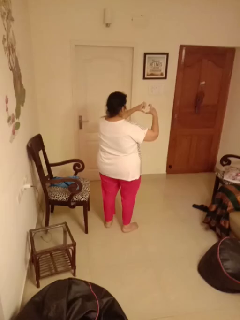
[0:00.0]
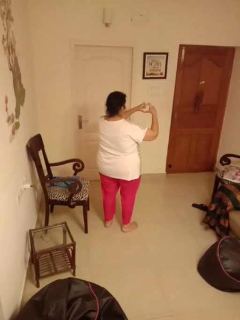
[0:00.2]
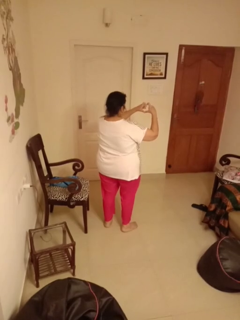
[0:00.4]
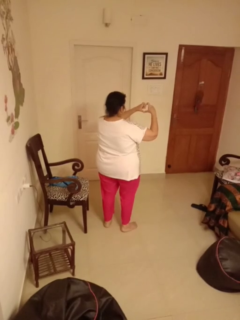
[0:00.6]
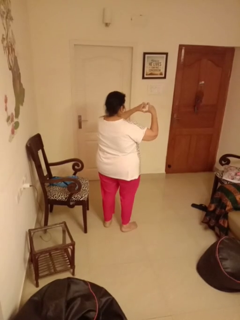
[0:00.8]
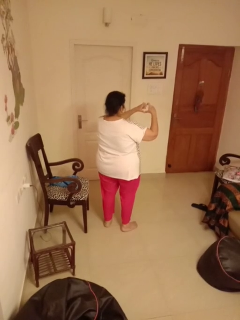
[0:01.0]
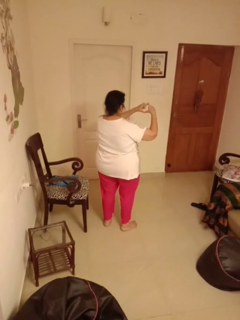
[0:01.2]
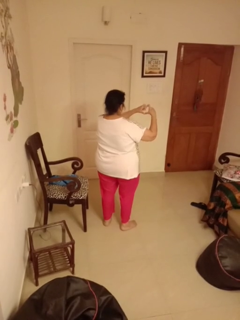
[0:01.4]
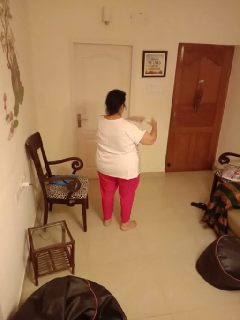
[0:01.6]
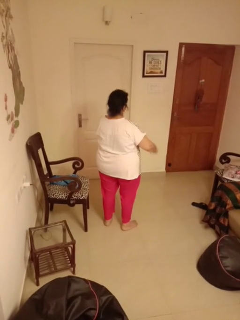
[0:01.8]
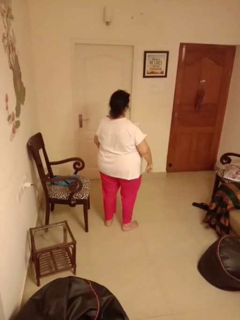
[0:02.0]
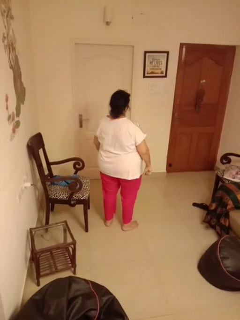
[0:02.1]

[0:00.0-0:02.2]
person gestures heart

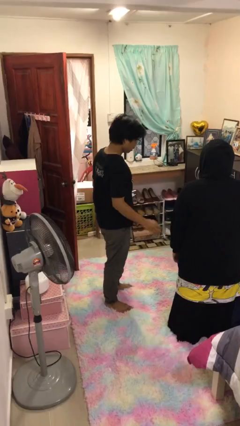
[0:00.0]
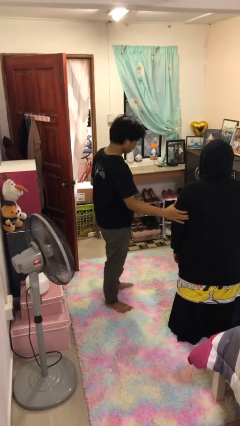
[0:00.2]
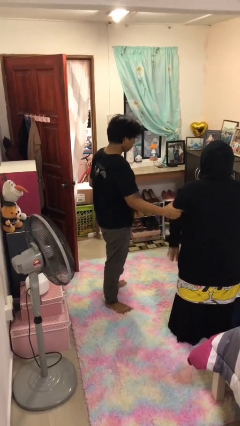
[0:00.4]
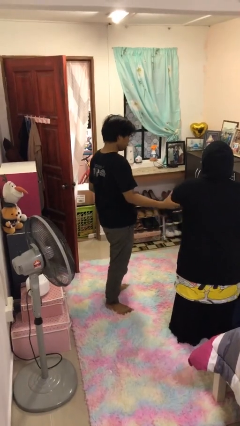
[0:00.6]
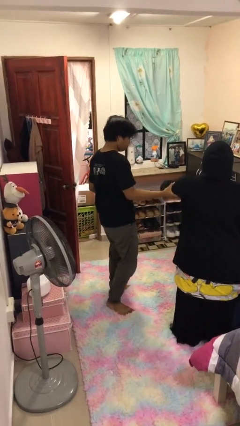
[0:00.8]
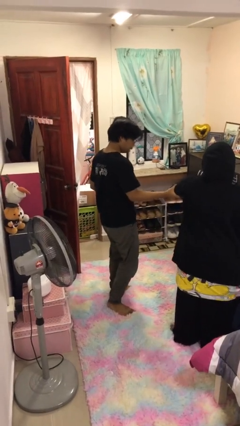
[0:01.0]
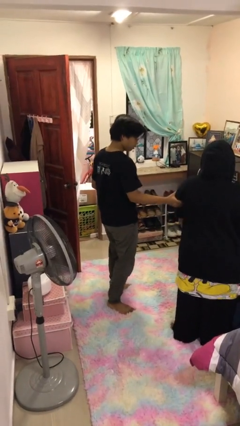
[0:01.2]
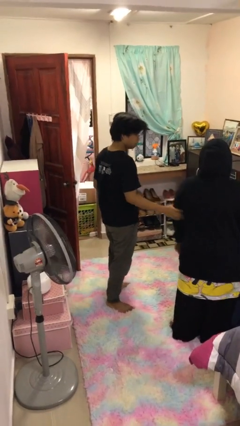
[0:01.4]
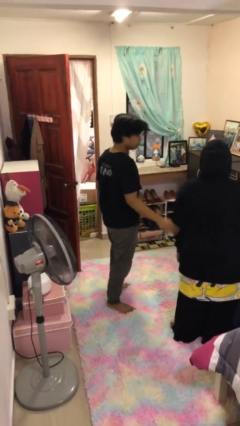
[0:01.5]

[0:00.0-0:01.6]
person grabs person by bicep

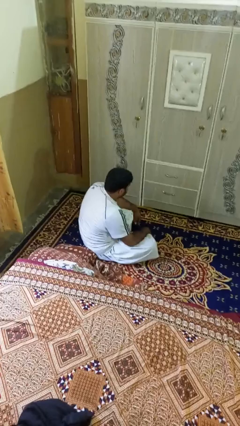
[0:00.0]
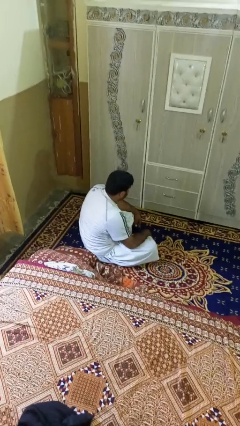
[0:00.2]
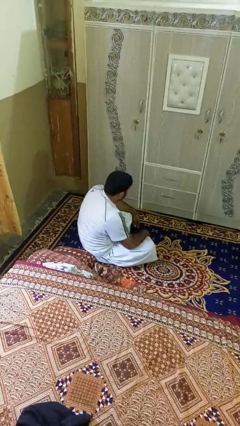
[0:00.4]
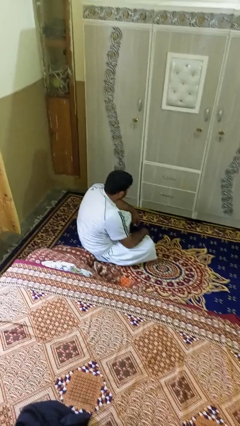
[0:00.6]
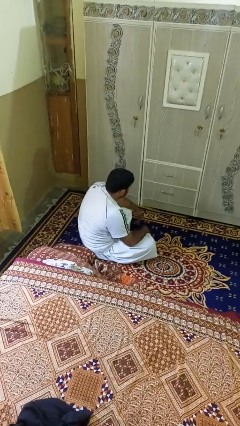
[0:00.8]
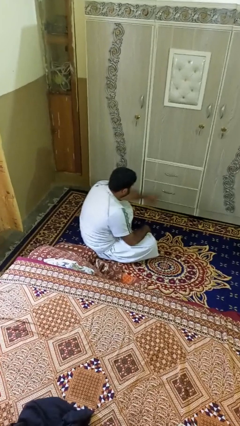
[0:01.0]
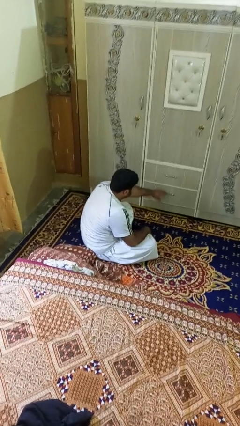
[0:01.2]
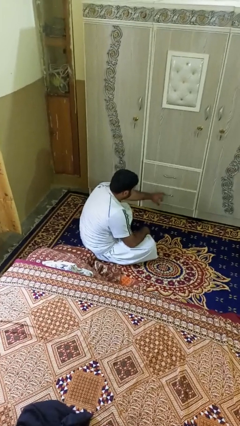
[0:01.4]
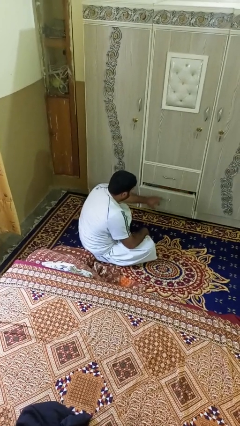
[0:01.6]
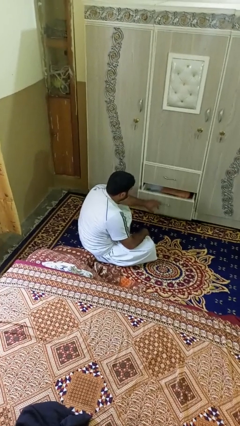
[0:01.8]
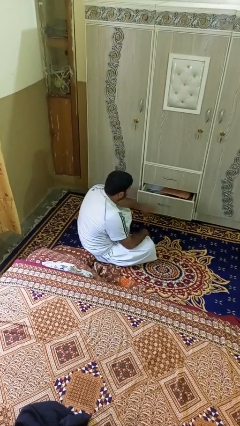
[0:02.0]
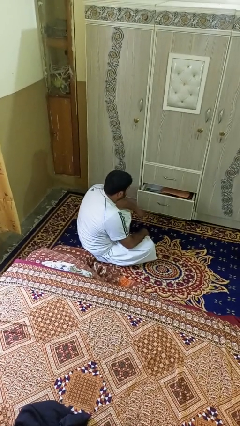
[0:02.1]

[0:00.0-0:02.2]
person opens dresser drawer

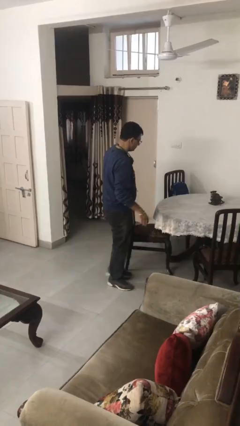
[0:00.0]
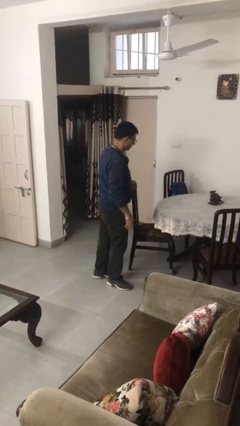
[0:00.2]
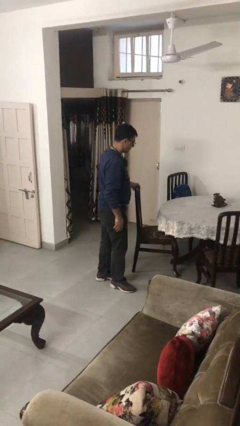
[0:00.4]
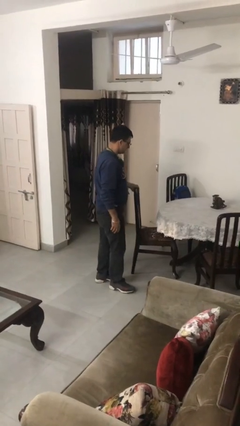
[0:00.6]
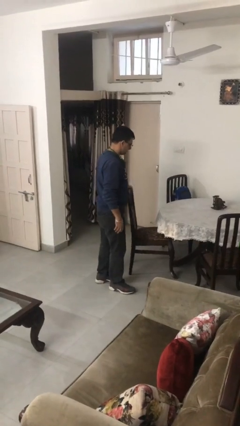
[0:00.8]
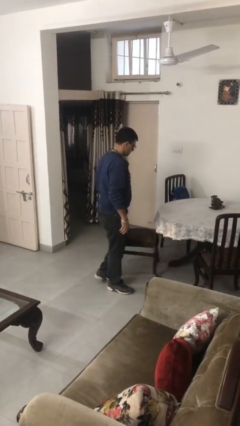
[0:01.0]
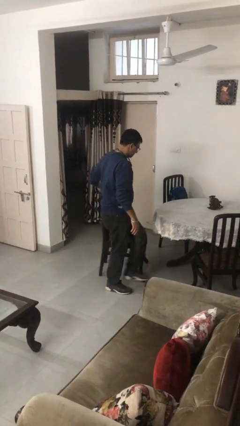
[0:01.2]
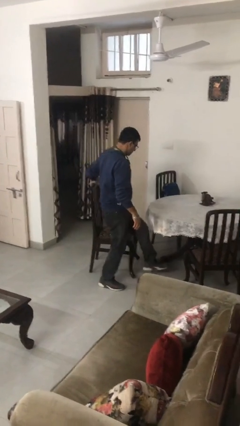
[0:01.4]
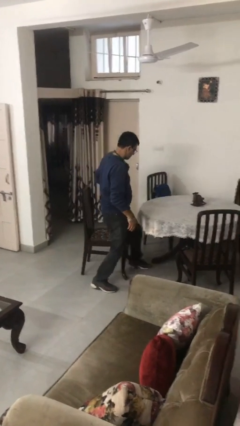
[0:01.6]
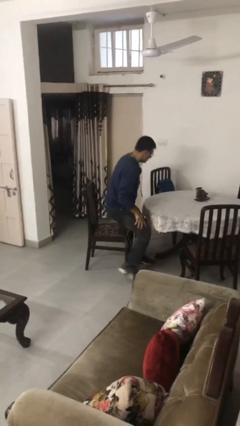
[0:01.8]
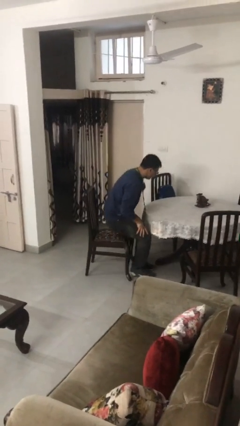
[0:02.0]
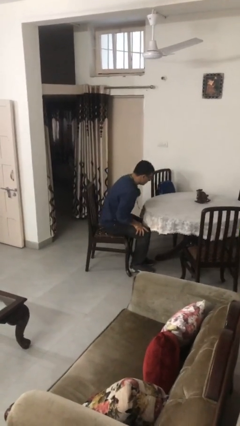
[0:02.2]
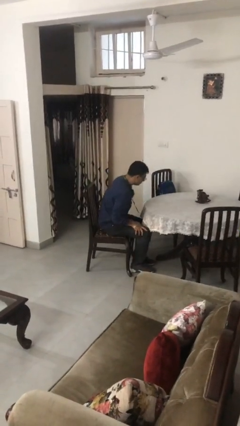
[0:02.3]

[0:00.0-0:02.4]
person sits down

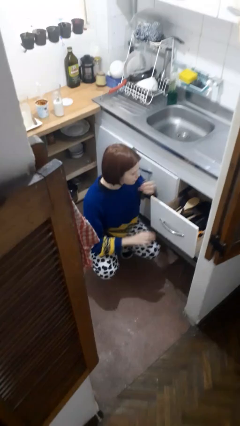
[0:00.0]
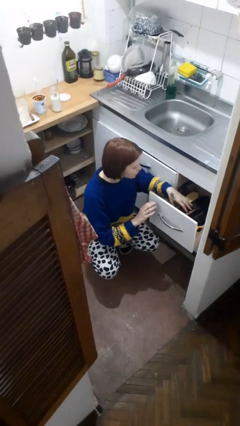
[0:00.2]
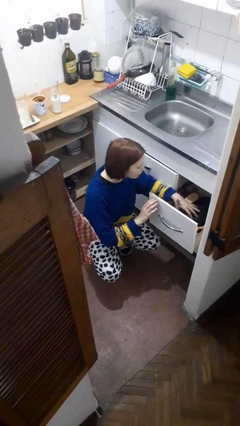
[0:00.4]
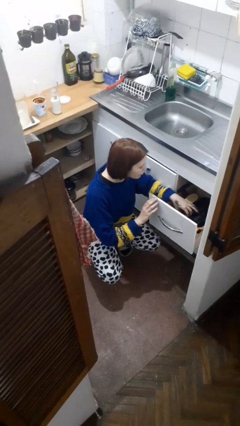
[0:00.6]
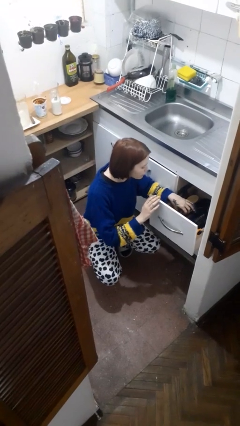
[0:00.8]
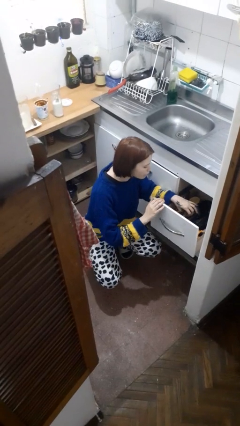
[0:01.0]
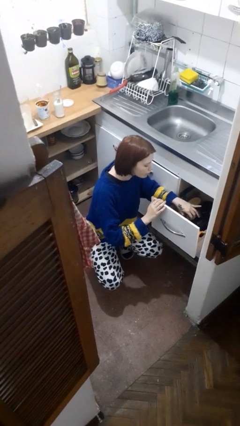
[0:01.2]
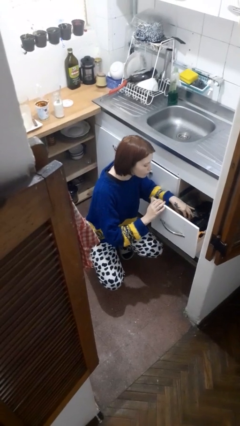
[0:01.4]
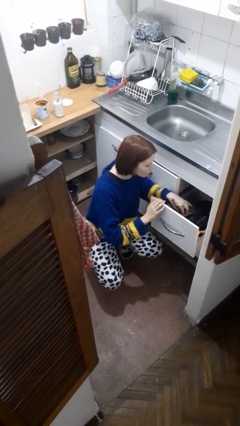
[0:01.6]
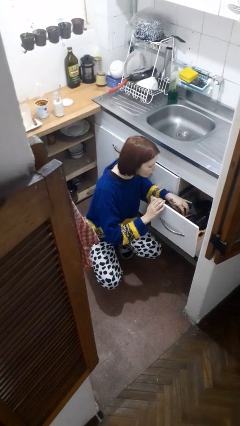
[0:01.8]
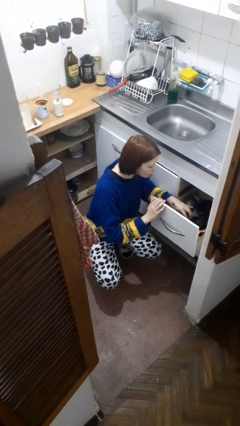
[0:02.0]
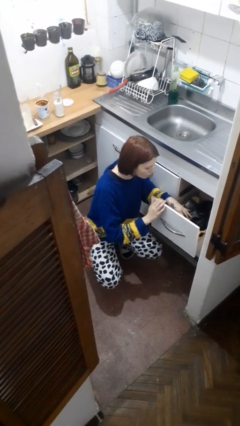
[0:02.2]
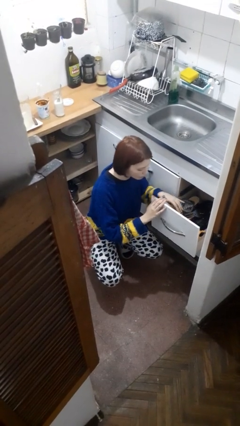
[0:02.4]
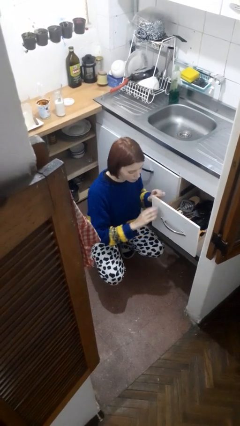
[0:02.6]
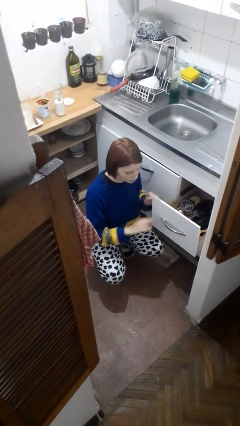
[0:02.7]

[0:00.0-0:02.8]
person searches in kitchen drawer

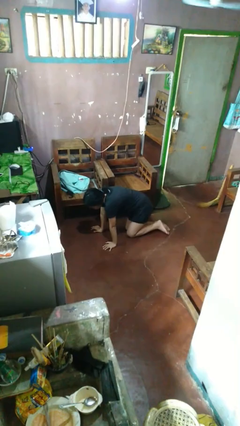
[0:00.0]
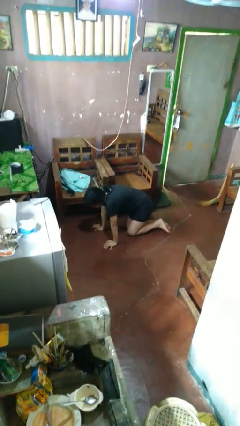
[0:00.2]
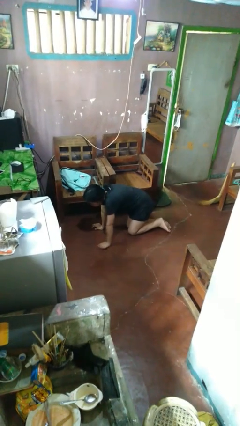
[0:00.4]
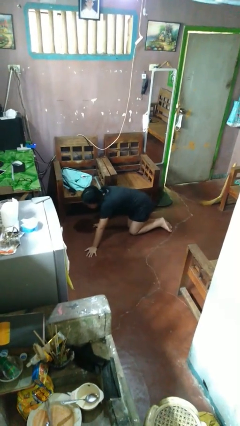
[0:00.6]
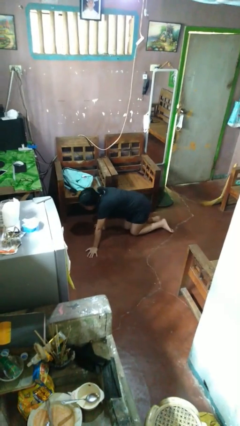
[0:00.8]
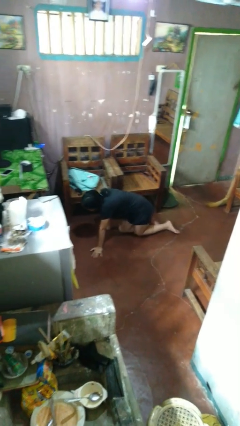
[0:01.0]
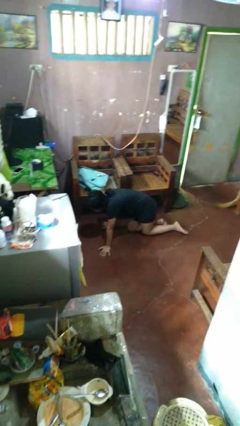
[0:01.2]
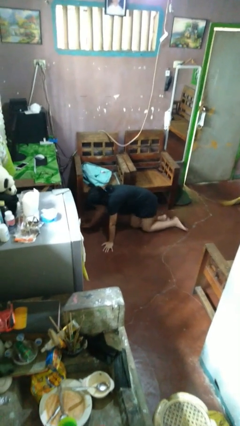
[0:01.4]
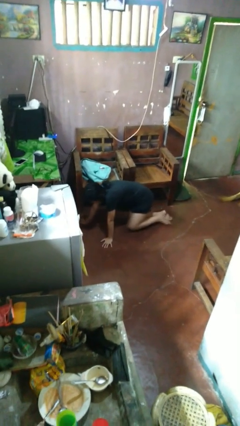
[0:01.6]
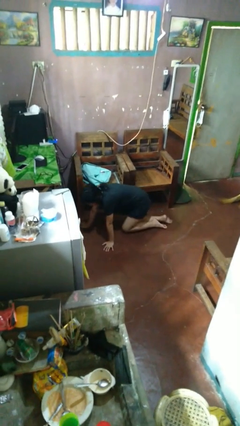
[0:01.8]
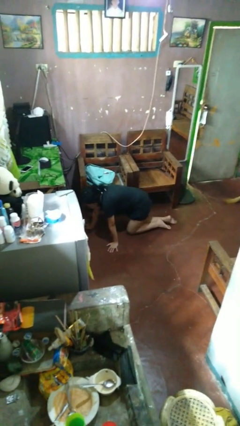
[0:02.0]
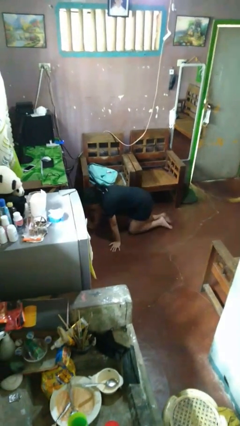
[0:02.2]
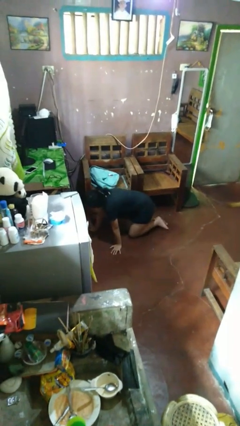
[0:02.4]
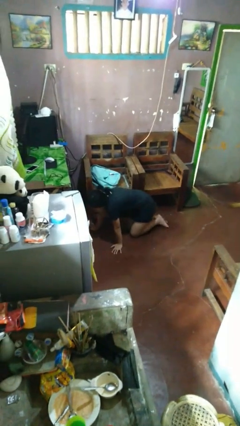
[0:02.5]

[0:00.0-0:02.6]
person crawls

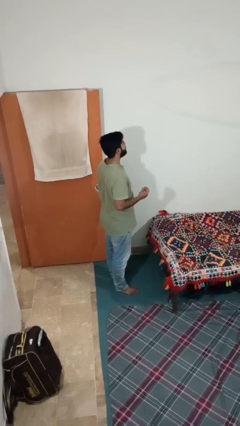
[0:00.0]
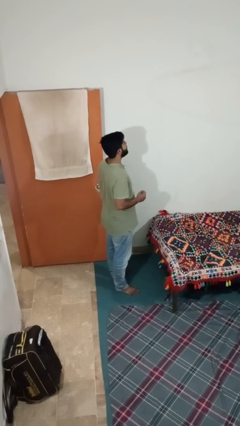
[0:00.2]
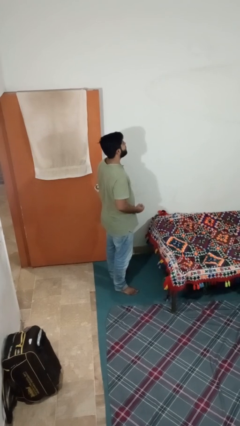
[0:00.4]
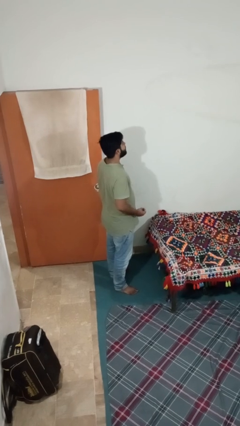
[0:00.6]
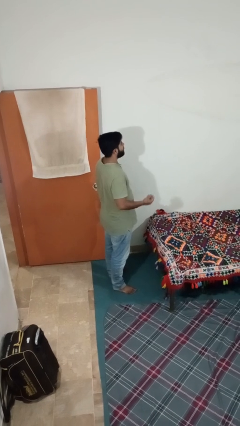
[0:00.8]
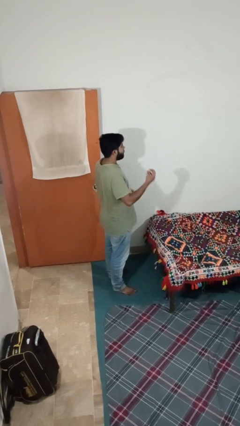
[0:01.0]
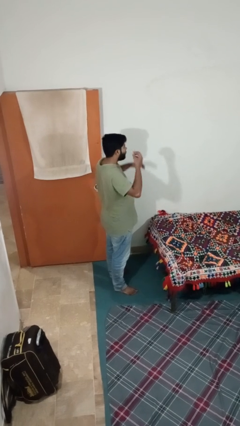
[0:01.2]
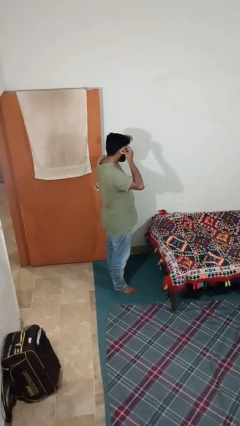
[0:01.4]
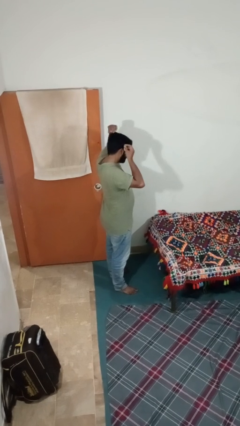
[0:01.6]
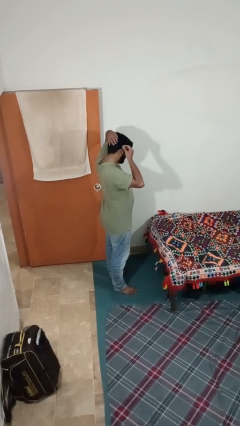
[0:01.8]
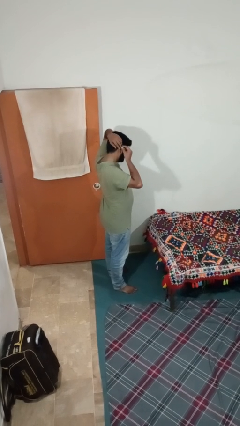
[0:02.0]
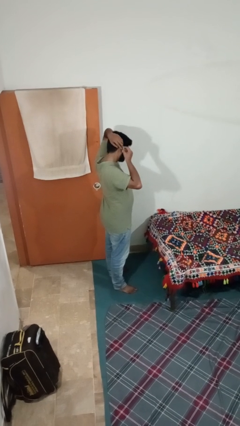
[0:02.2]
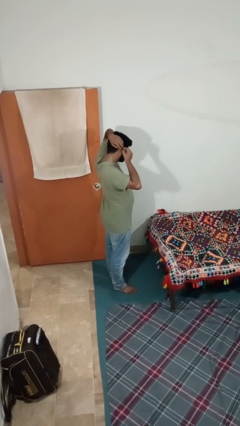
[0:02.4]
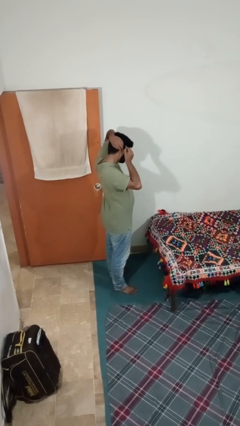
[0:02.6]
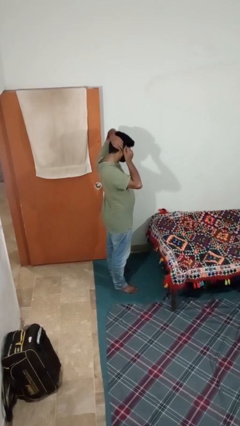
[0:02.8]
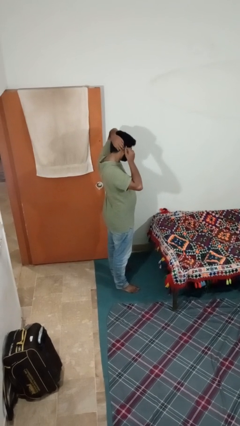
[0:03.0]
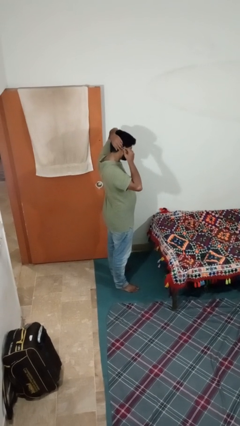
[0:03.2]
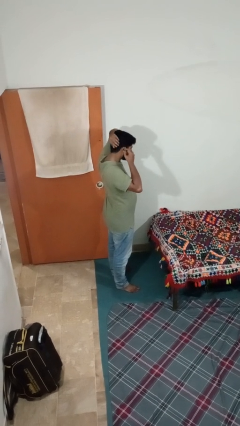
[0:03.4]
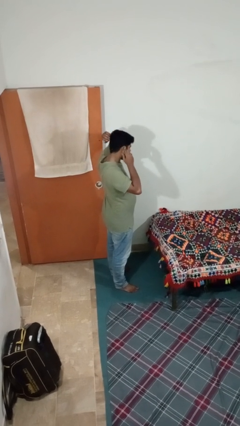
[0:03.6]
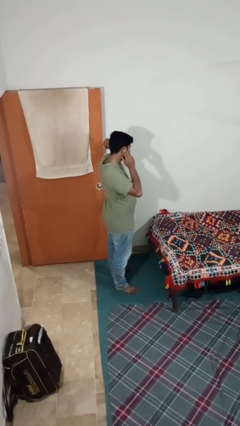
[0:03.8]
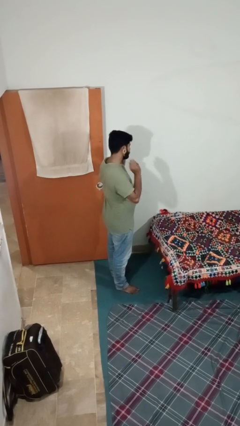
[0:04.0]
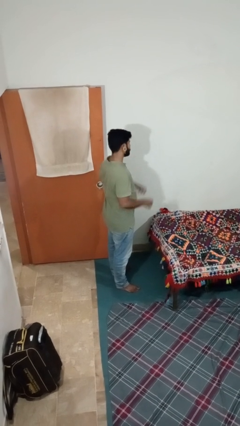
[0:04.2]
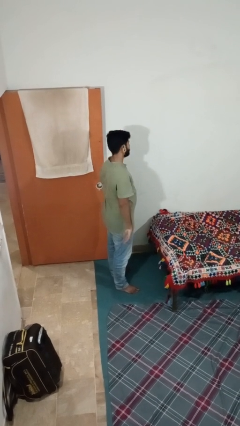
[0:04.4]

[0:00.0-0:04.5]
person puts on earrings
